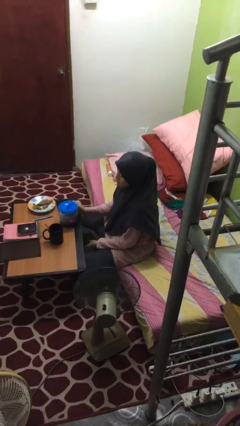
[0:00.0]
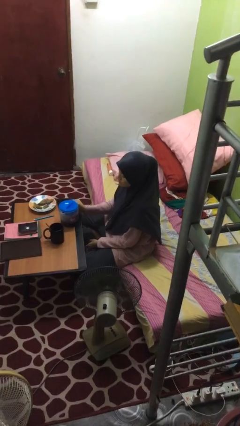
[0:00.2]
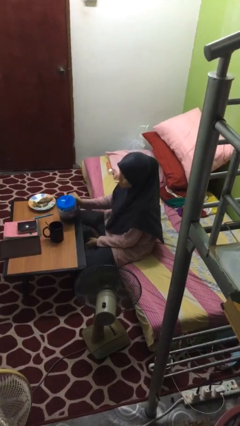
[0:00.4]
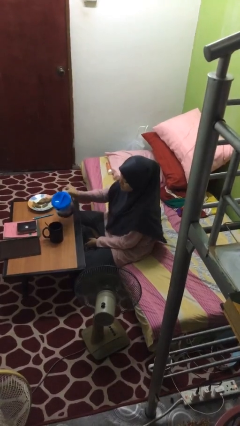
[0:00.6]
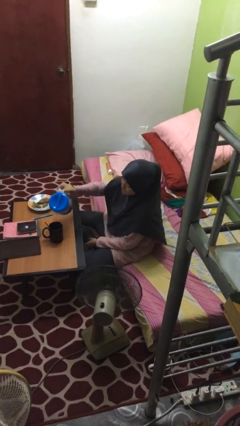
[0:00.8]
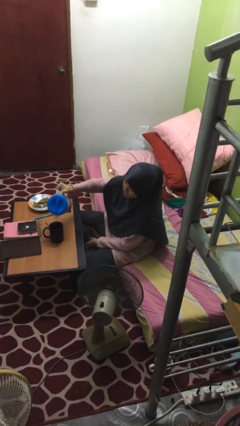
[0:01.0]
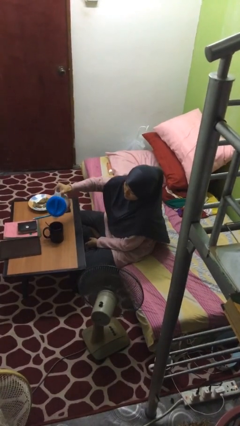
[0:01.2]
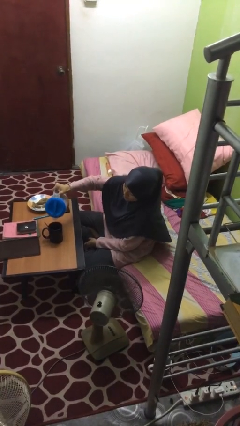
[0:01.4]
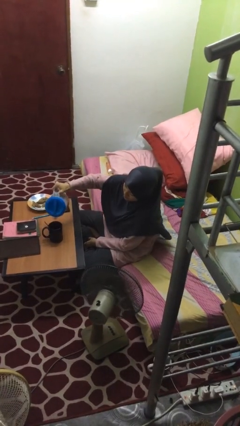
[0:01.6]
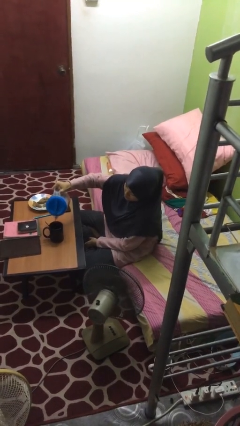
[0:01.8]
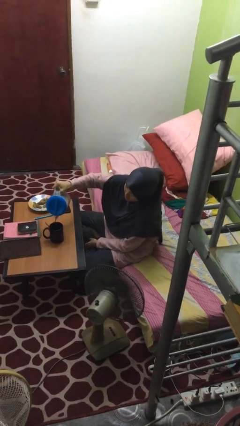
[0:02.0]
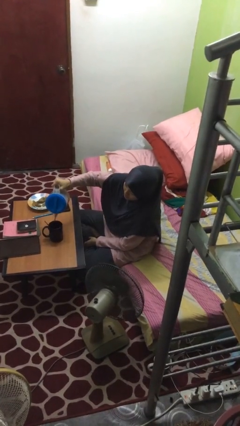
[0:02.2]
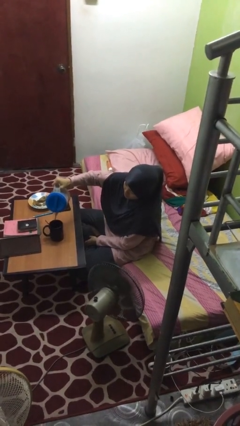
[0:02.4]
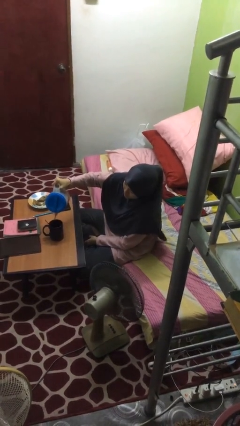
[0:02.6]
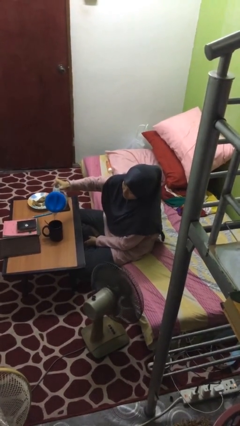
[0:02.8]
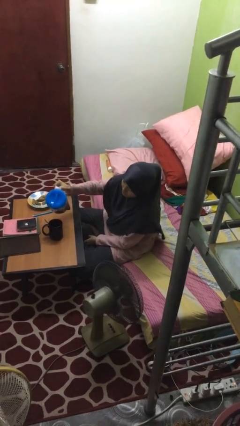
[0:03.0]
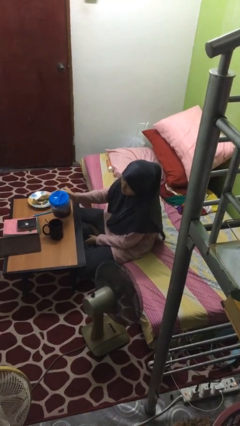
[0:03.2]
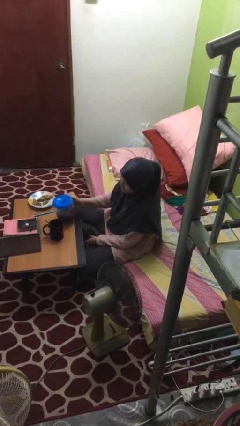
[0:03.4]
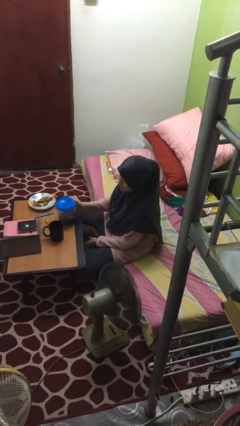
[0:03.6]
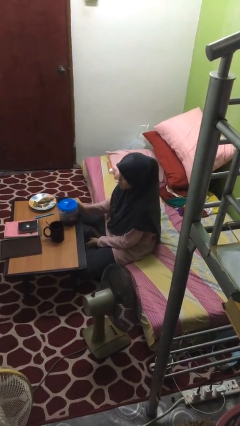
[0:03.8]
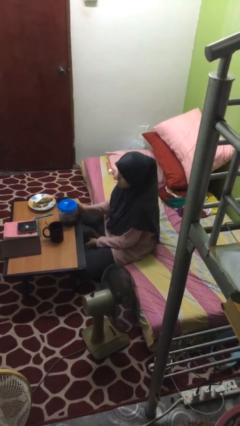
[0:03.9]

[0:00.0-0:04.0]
person pours coffee into mug

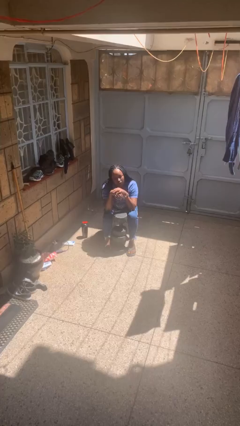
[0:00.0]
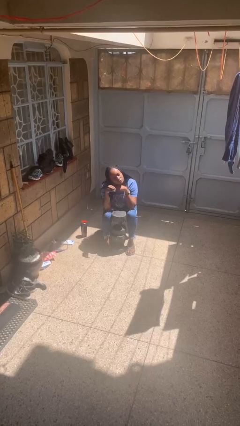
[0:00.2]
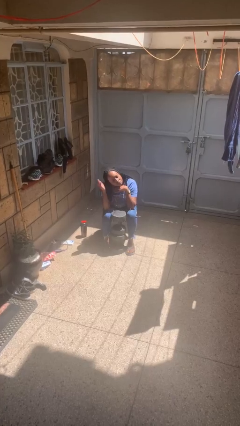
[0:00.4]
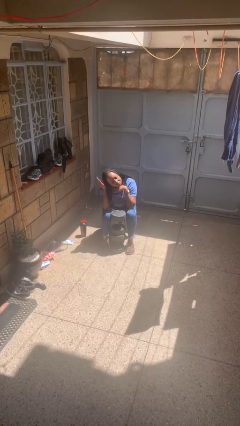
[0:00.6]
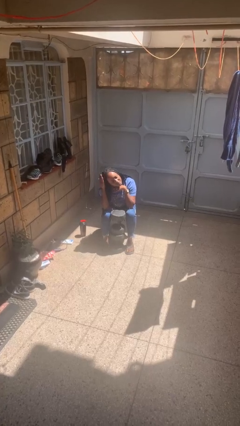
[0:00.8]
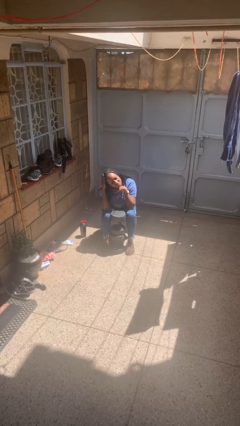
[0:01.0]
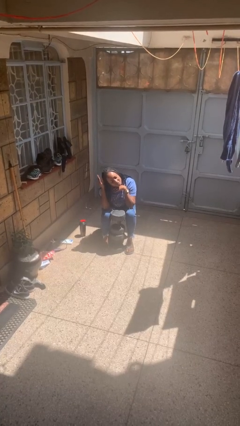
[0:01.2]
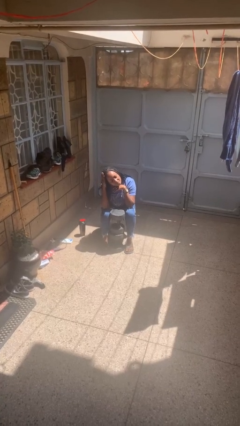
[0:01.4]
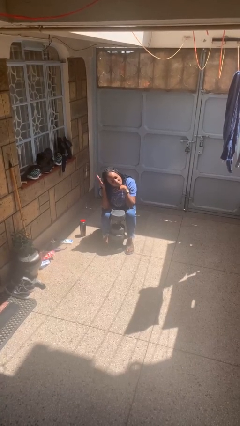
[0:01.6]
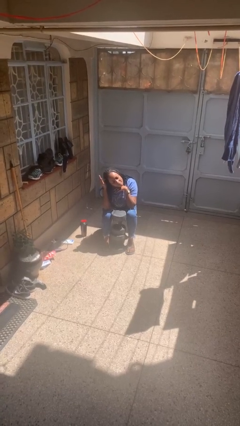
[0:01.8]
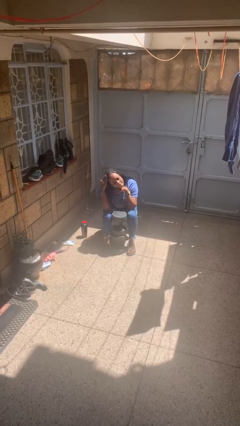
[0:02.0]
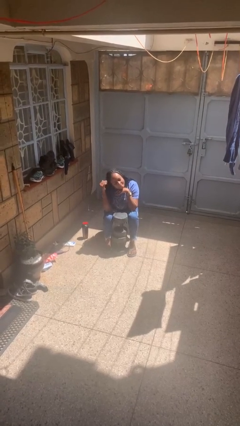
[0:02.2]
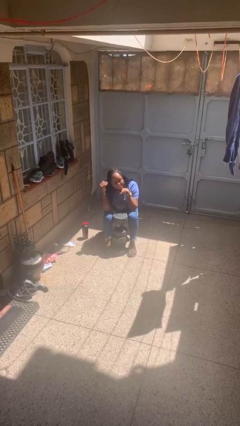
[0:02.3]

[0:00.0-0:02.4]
person pats head

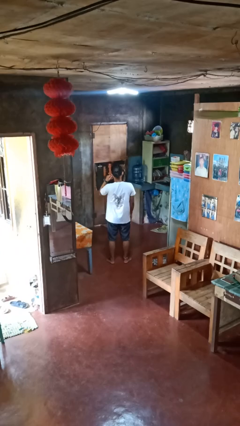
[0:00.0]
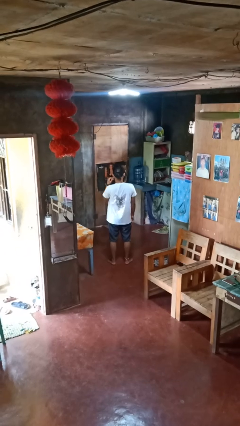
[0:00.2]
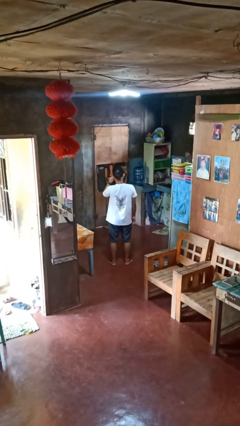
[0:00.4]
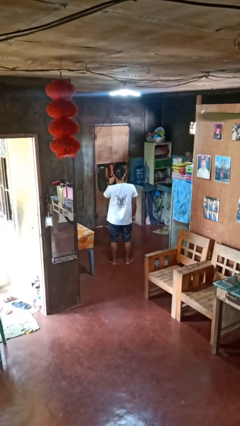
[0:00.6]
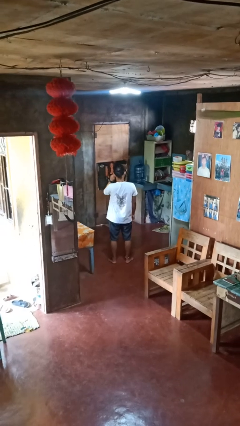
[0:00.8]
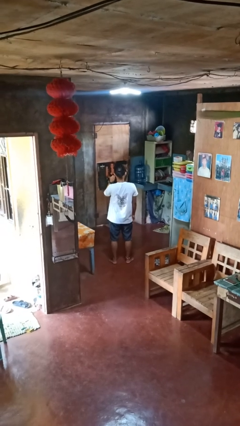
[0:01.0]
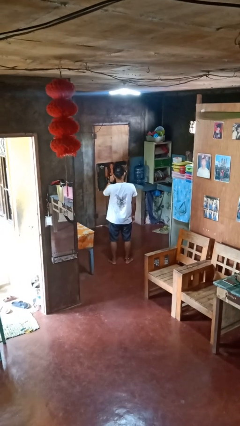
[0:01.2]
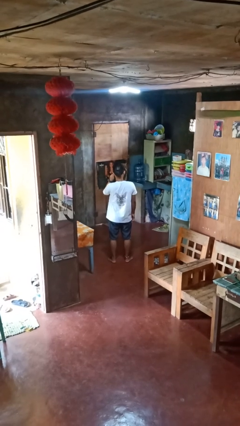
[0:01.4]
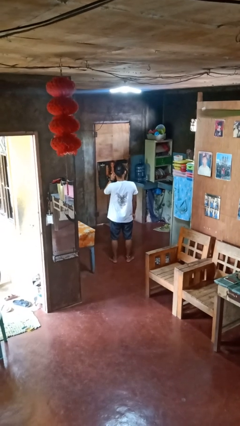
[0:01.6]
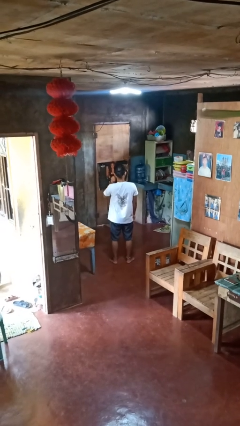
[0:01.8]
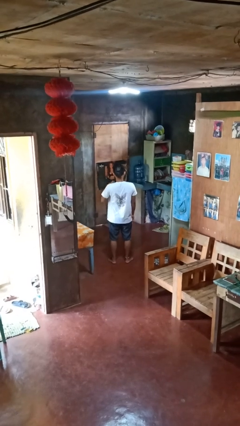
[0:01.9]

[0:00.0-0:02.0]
person touches earlobe

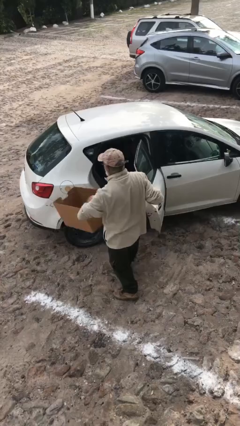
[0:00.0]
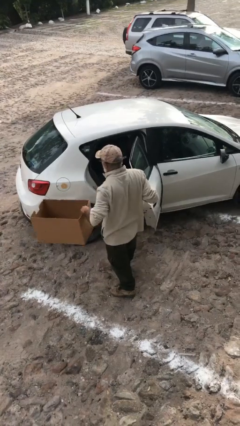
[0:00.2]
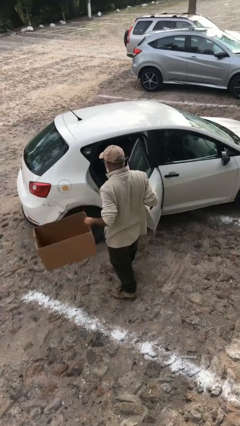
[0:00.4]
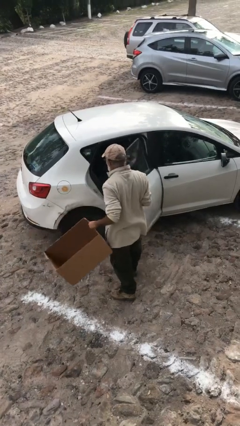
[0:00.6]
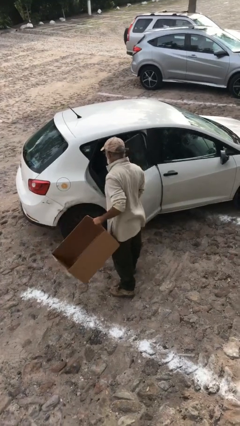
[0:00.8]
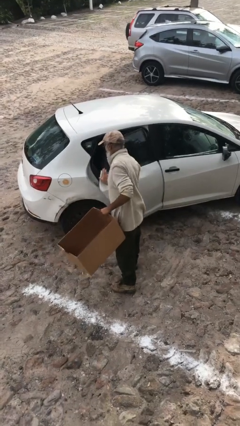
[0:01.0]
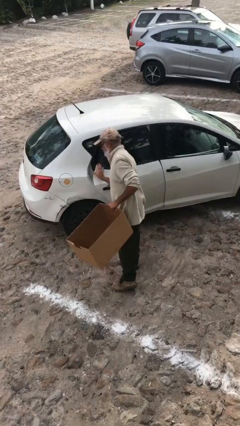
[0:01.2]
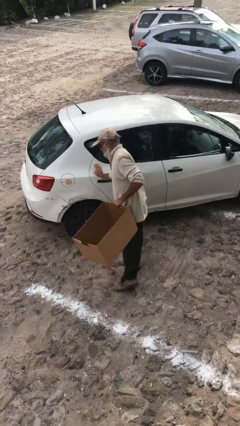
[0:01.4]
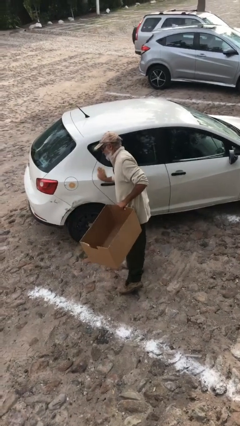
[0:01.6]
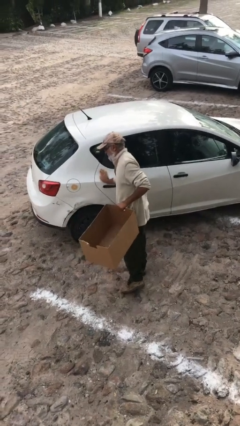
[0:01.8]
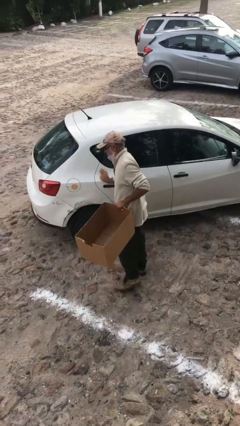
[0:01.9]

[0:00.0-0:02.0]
person closes car door

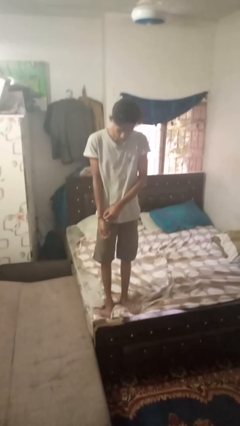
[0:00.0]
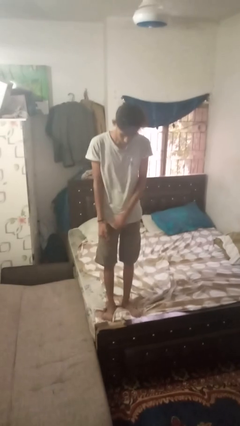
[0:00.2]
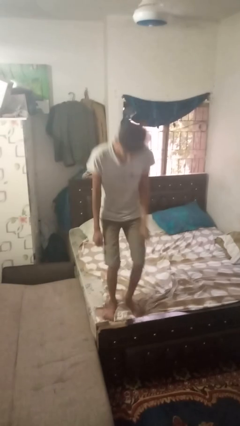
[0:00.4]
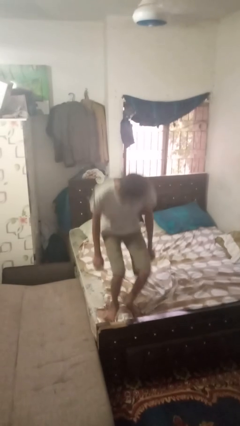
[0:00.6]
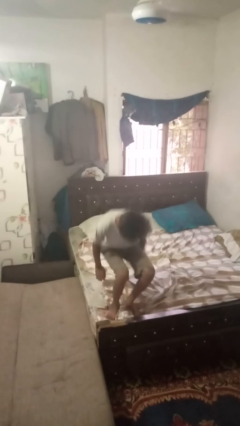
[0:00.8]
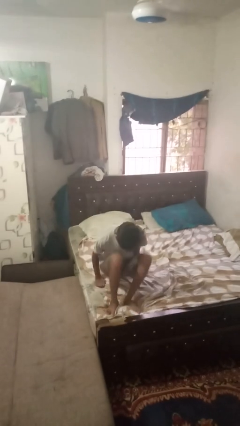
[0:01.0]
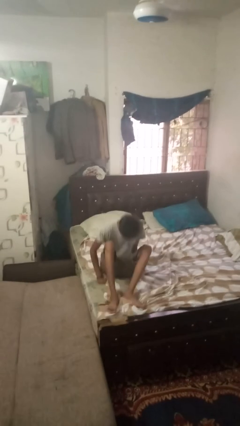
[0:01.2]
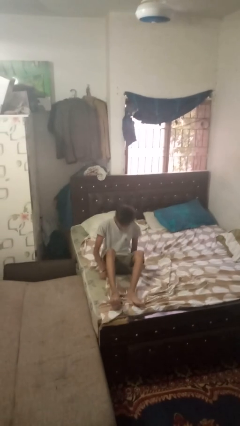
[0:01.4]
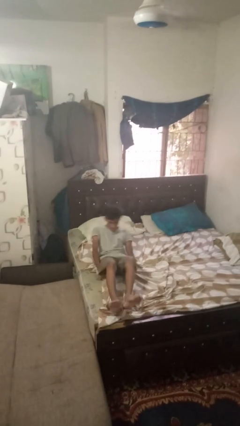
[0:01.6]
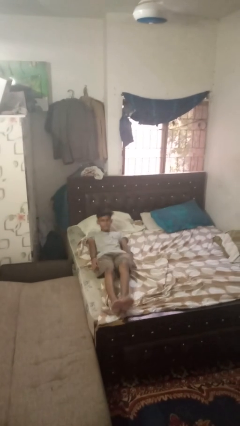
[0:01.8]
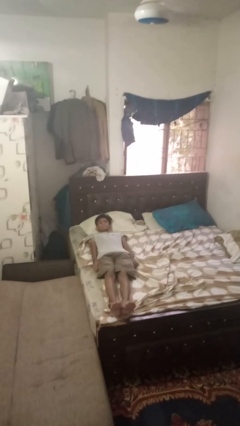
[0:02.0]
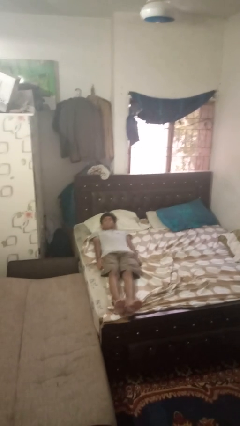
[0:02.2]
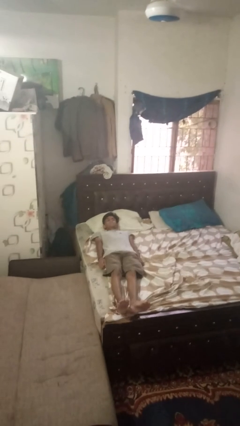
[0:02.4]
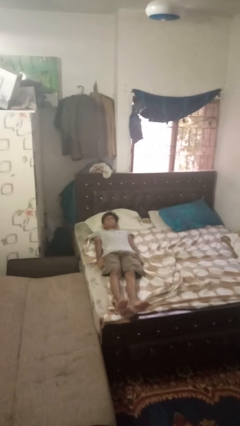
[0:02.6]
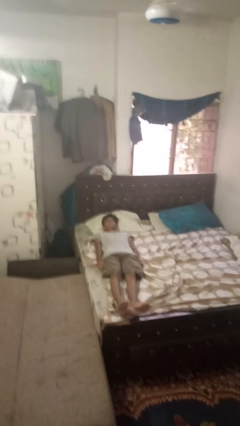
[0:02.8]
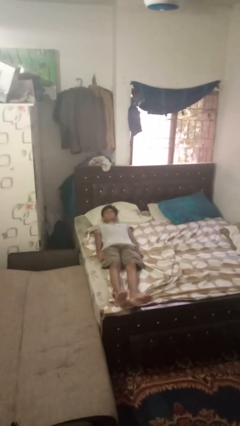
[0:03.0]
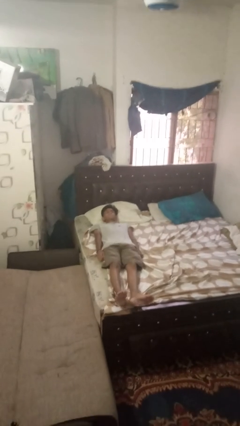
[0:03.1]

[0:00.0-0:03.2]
person lies down on bed

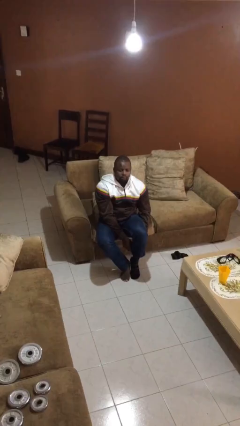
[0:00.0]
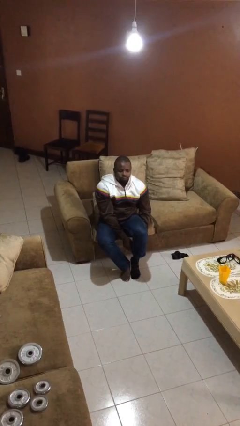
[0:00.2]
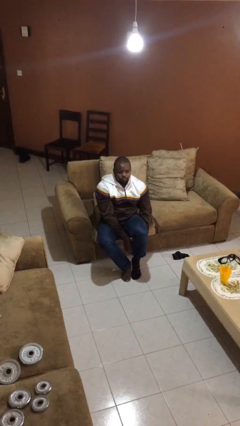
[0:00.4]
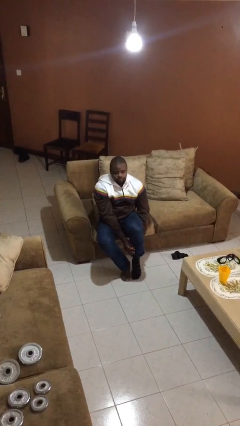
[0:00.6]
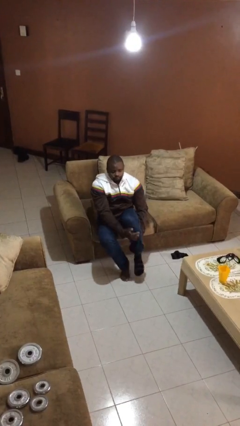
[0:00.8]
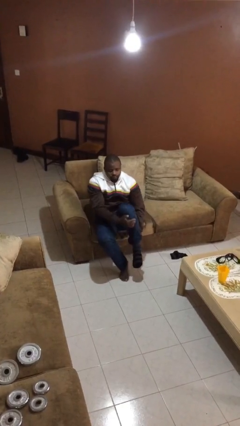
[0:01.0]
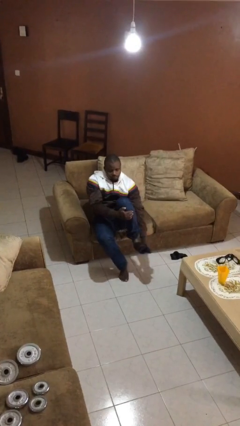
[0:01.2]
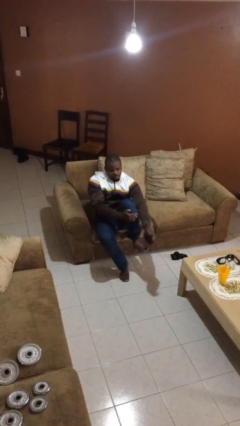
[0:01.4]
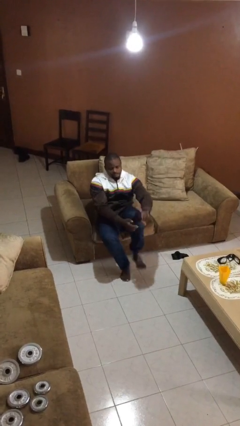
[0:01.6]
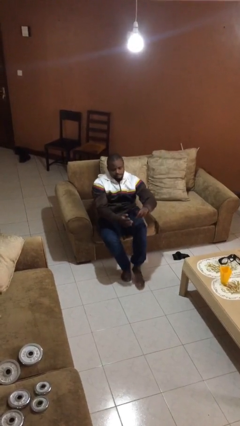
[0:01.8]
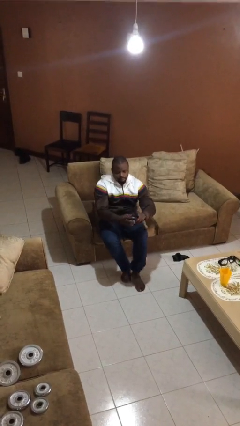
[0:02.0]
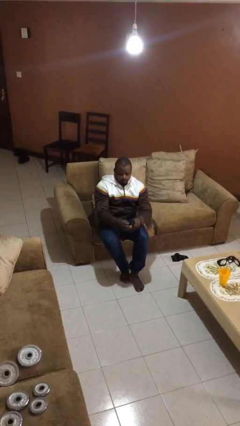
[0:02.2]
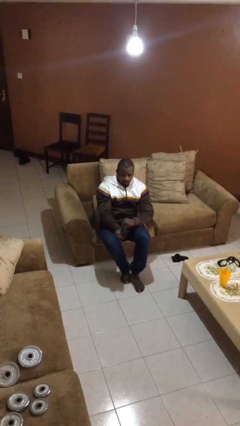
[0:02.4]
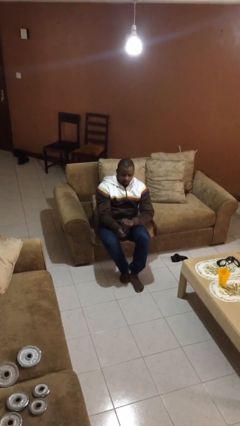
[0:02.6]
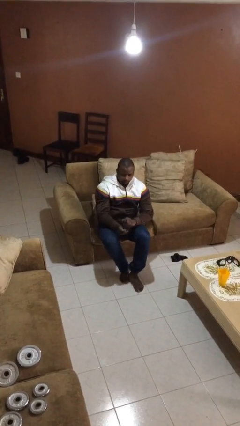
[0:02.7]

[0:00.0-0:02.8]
person takes off socks

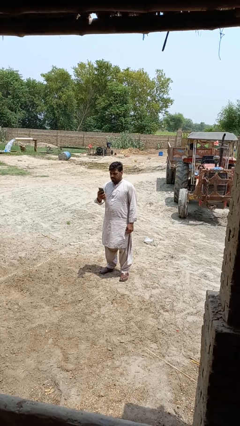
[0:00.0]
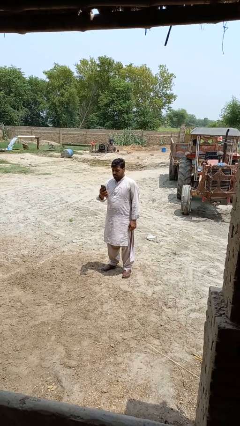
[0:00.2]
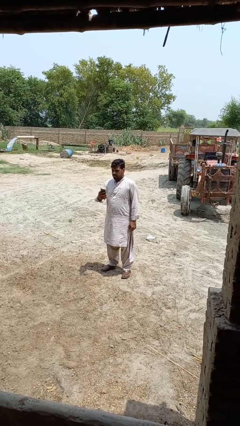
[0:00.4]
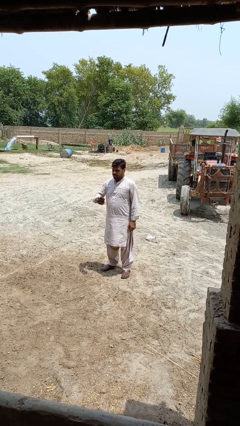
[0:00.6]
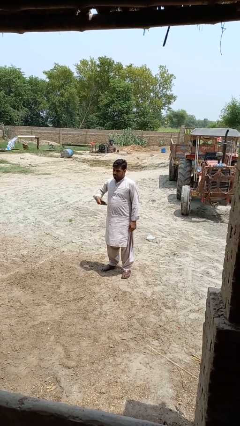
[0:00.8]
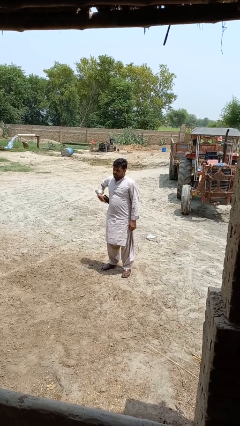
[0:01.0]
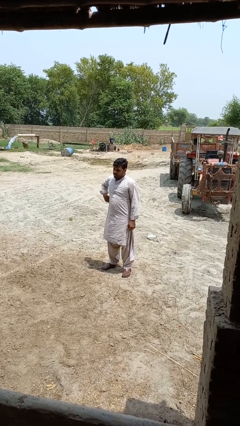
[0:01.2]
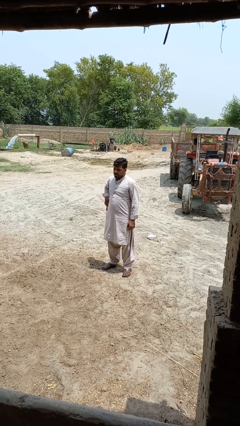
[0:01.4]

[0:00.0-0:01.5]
person puts phone into pocket
